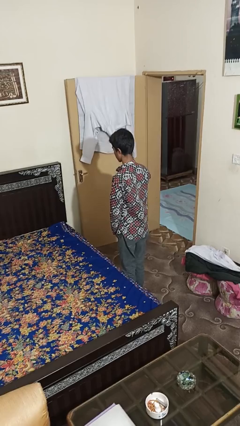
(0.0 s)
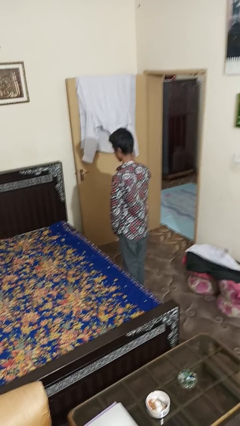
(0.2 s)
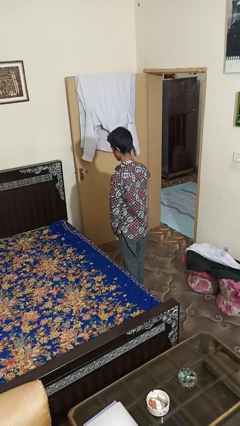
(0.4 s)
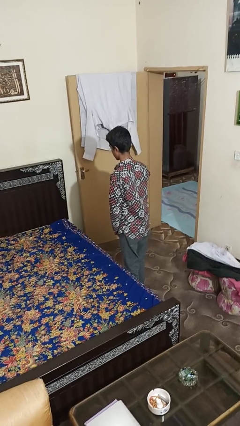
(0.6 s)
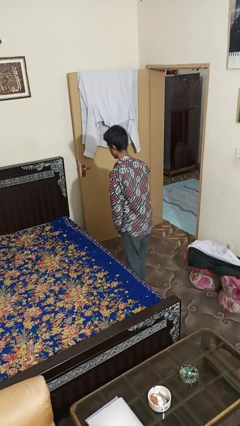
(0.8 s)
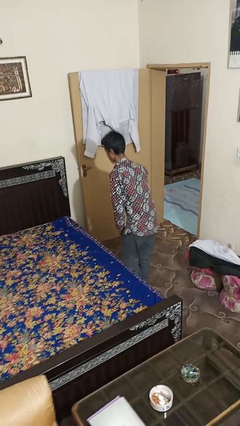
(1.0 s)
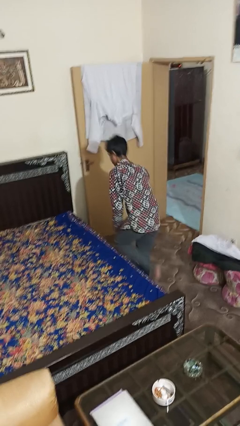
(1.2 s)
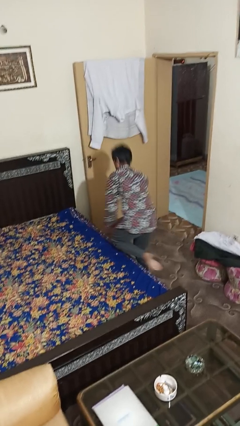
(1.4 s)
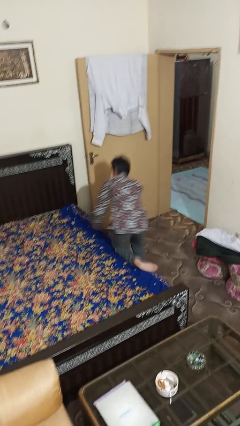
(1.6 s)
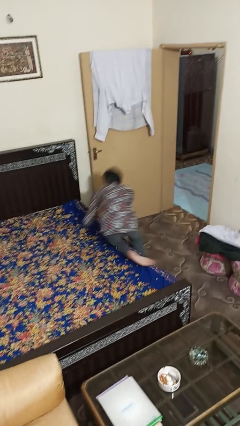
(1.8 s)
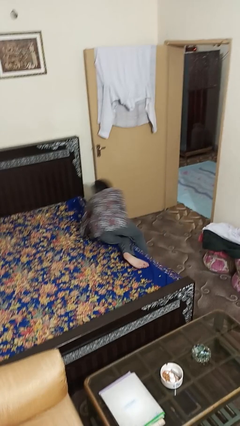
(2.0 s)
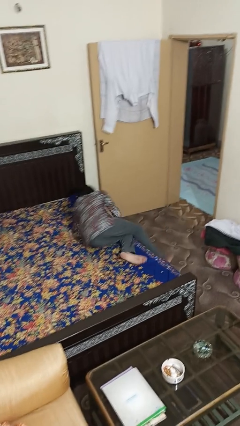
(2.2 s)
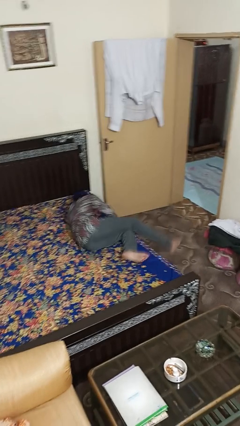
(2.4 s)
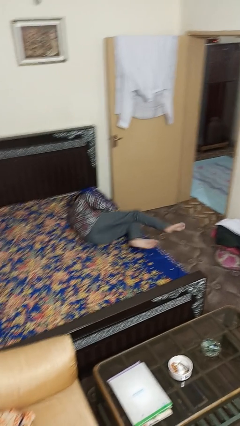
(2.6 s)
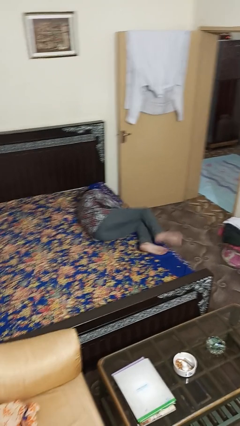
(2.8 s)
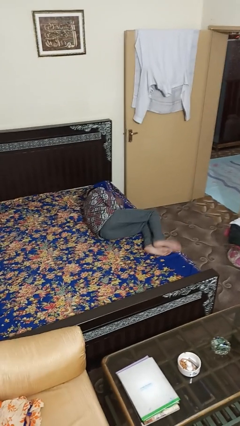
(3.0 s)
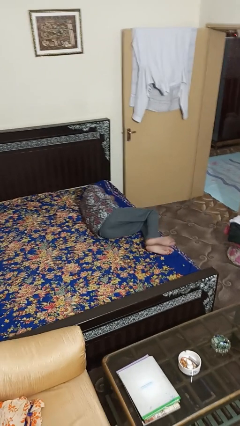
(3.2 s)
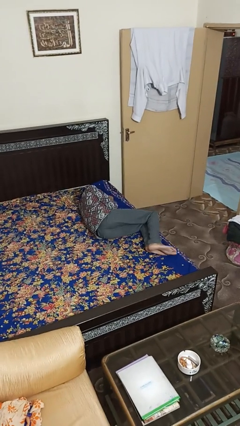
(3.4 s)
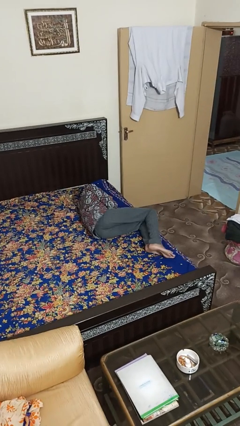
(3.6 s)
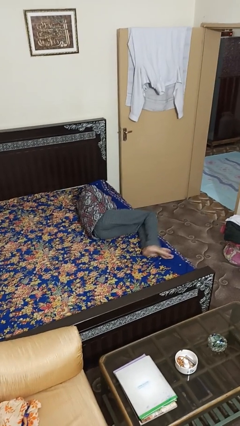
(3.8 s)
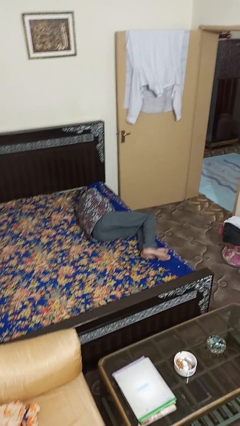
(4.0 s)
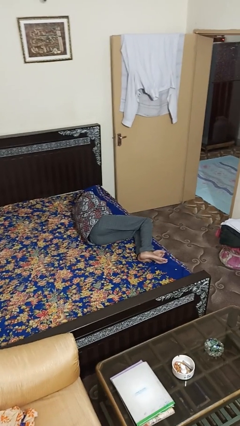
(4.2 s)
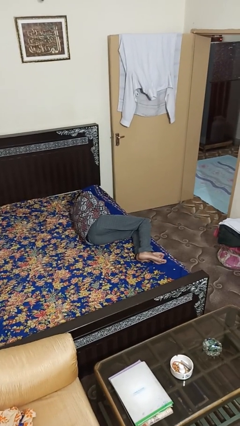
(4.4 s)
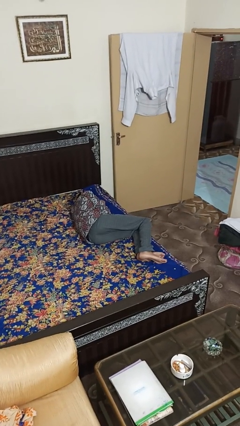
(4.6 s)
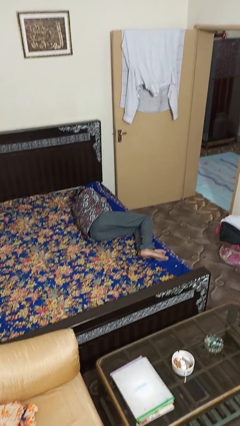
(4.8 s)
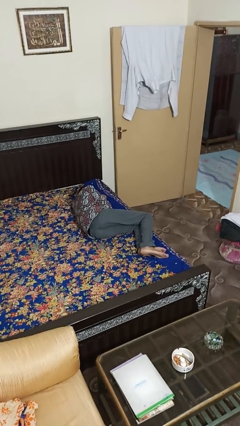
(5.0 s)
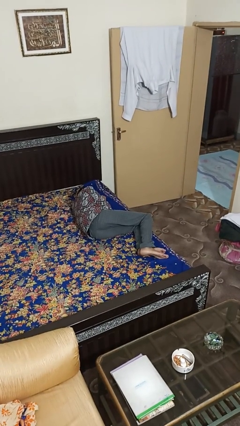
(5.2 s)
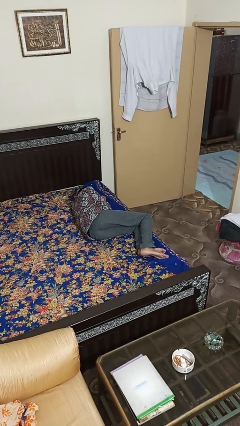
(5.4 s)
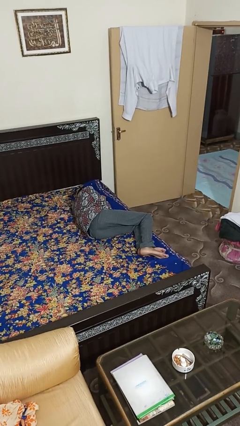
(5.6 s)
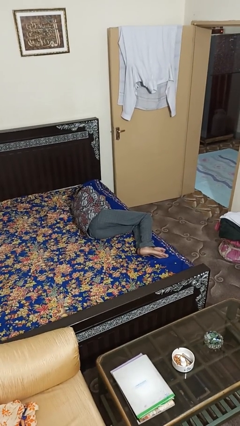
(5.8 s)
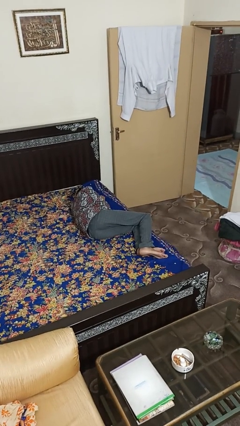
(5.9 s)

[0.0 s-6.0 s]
person lies down on bed

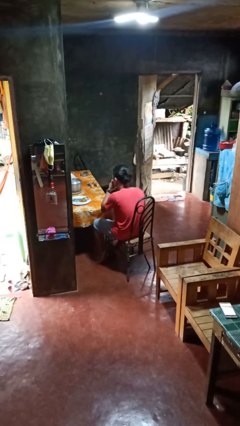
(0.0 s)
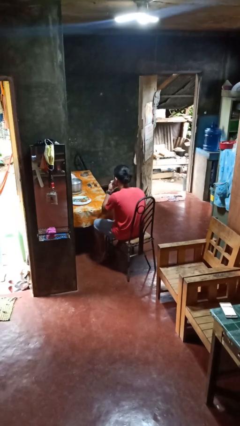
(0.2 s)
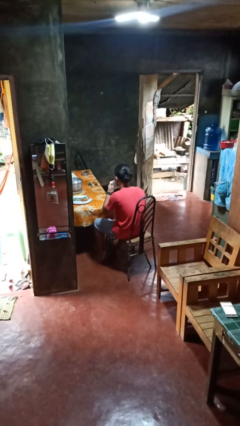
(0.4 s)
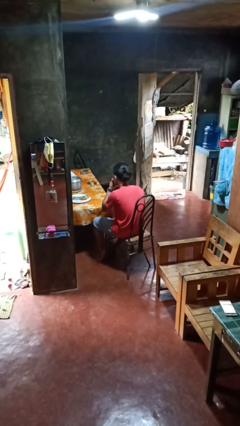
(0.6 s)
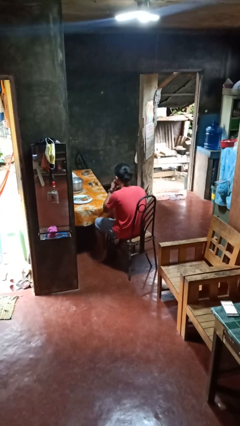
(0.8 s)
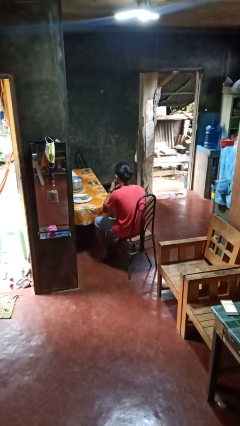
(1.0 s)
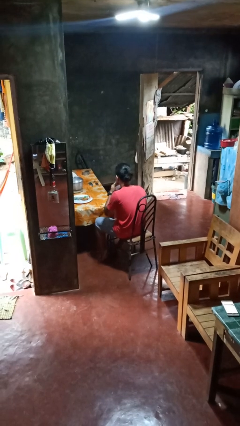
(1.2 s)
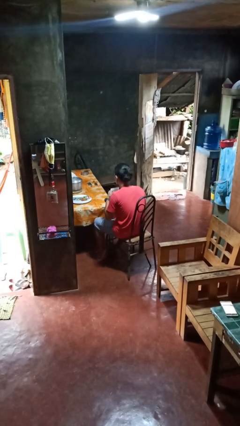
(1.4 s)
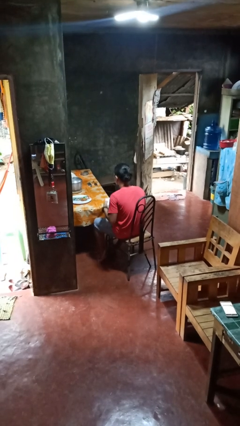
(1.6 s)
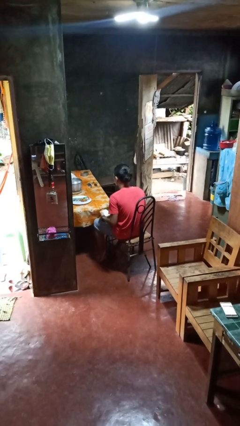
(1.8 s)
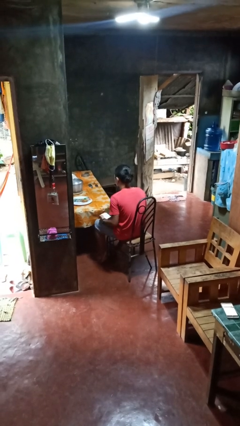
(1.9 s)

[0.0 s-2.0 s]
person wipes mouth with napkin

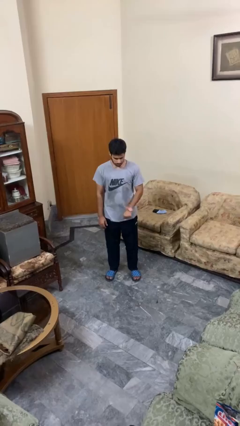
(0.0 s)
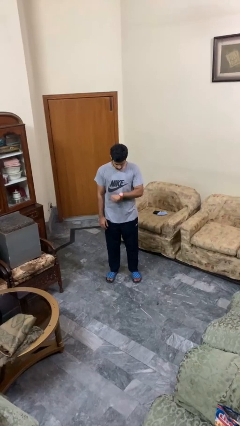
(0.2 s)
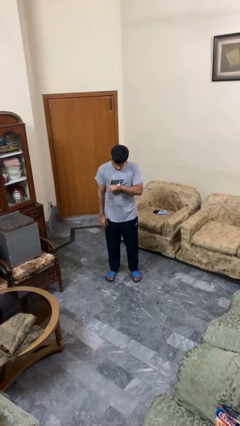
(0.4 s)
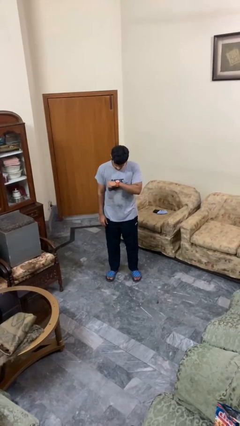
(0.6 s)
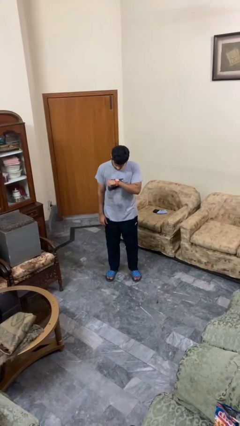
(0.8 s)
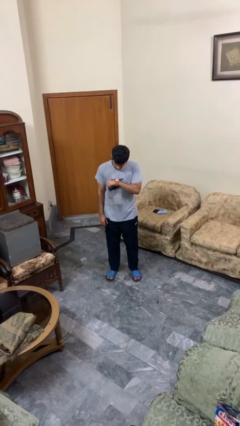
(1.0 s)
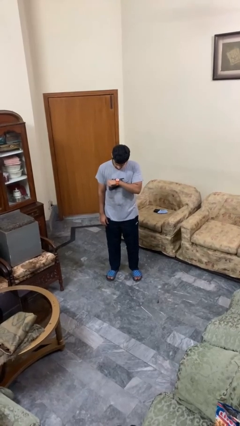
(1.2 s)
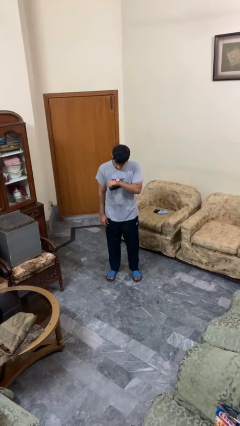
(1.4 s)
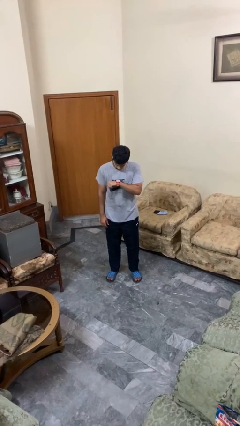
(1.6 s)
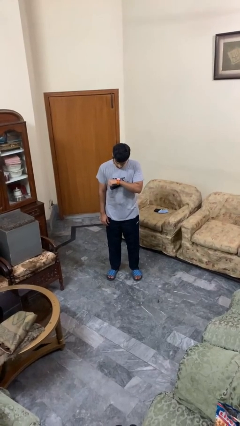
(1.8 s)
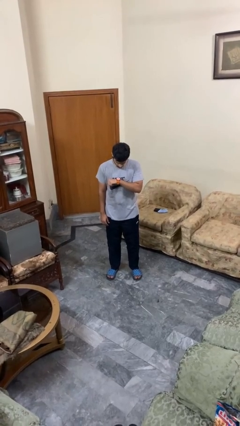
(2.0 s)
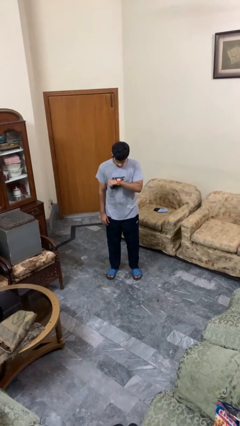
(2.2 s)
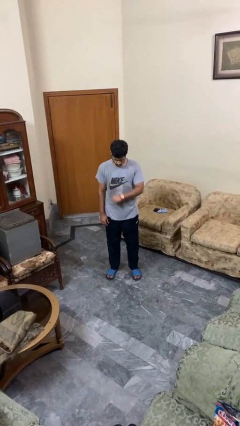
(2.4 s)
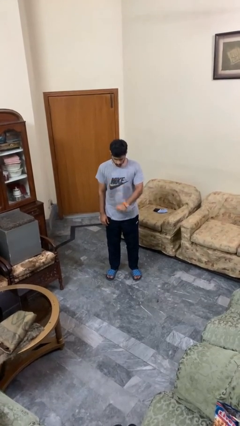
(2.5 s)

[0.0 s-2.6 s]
person looks at wristwatch

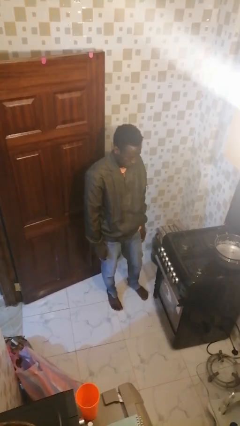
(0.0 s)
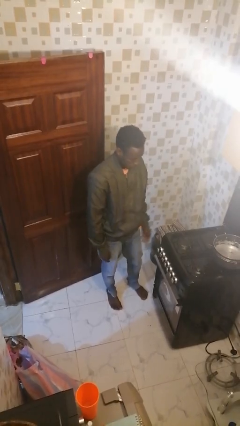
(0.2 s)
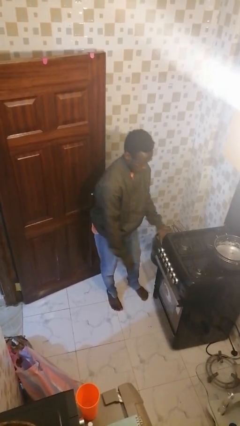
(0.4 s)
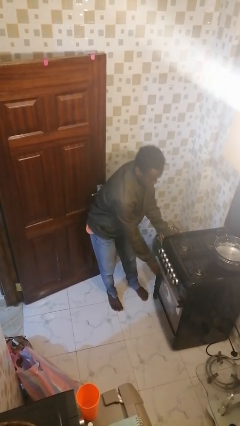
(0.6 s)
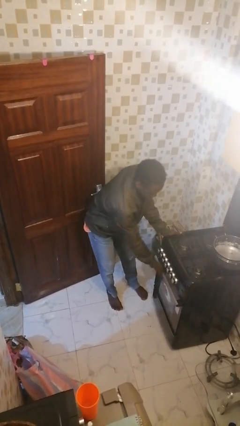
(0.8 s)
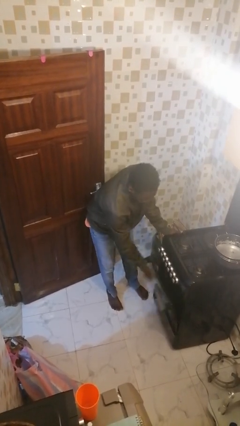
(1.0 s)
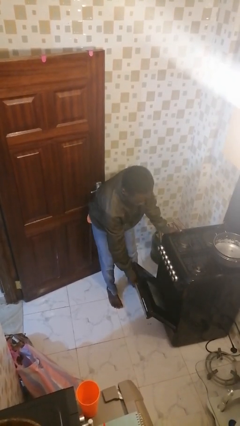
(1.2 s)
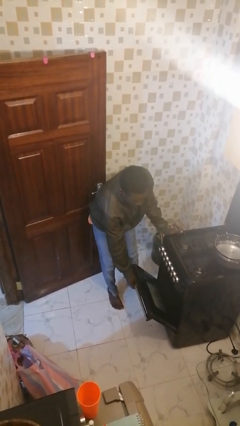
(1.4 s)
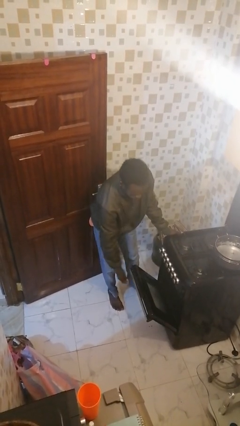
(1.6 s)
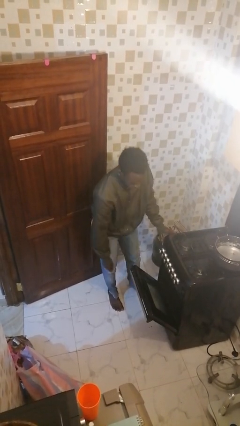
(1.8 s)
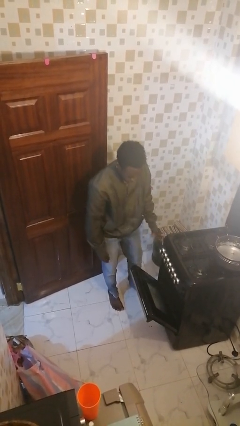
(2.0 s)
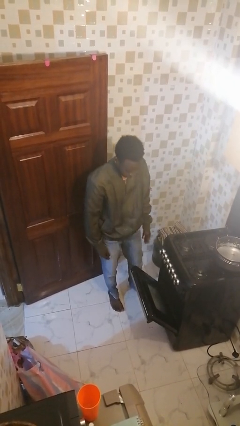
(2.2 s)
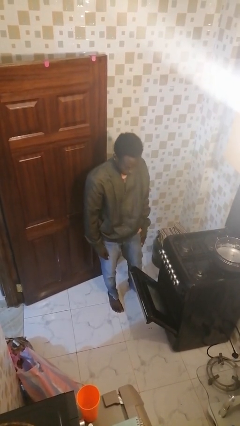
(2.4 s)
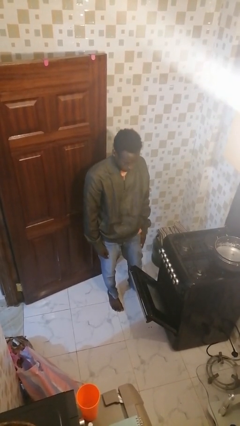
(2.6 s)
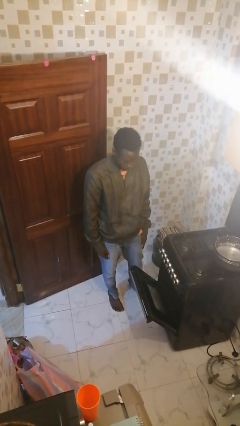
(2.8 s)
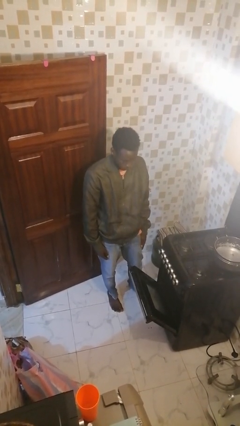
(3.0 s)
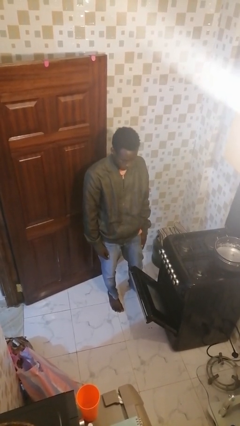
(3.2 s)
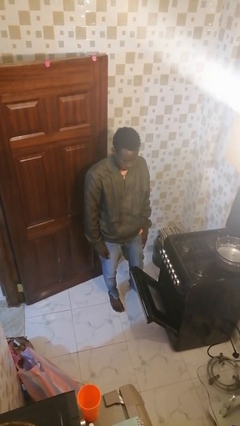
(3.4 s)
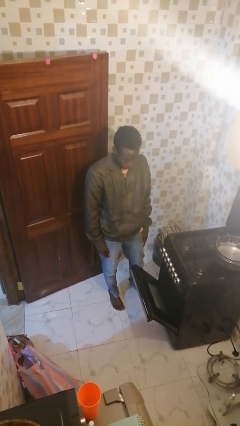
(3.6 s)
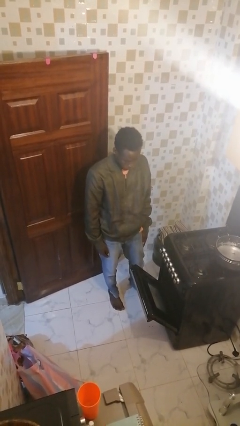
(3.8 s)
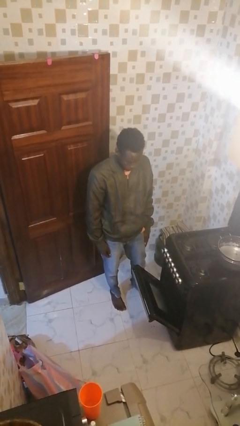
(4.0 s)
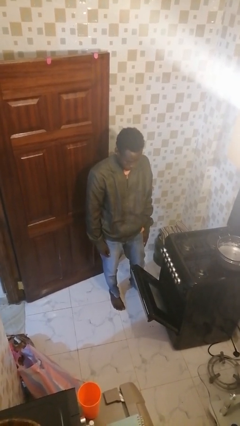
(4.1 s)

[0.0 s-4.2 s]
person opens oven door

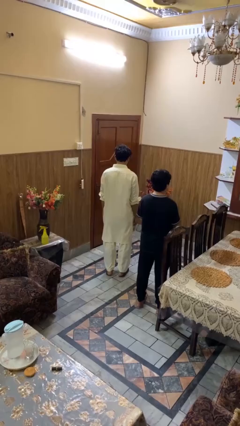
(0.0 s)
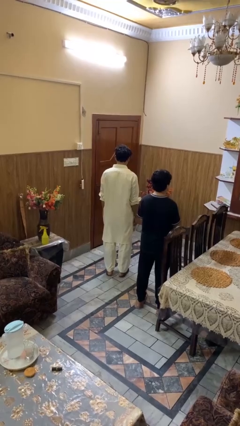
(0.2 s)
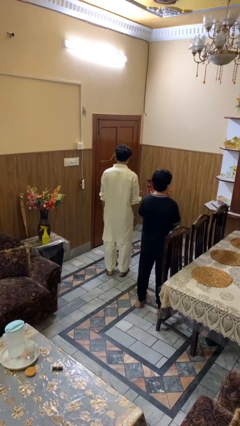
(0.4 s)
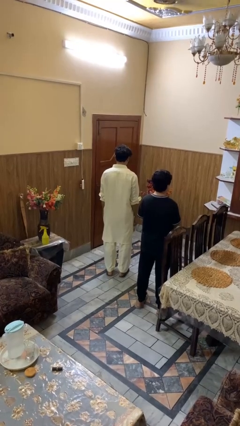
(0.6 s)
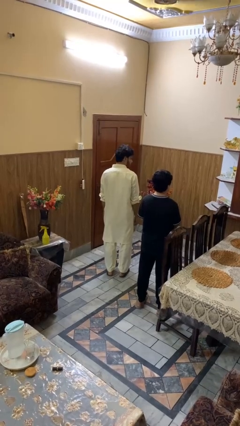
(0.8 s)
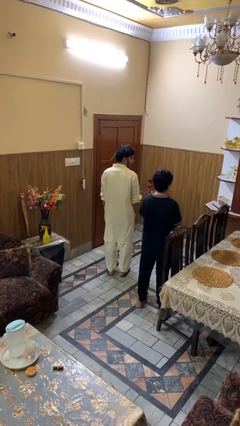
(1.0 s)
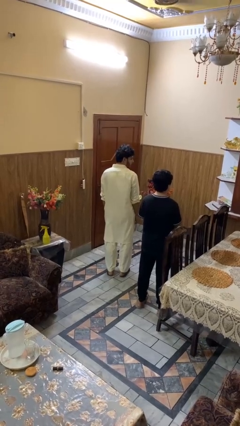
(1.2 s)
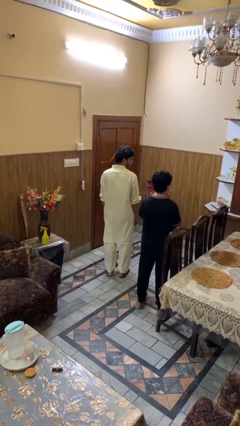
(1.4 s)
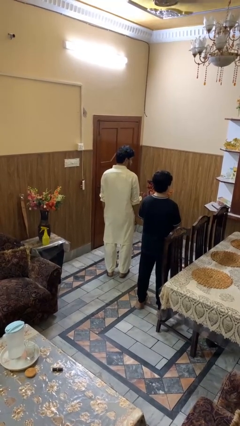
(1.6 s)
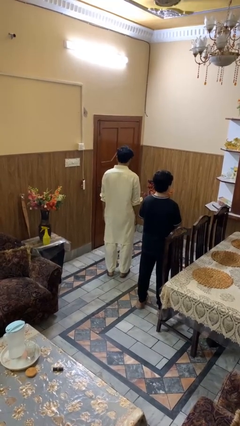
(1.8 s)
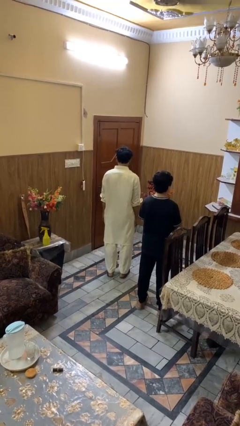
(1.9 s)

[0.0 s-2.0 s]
person looks over shoulder

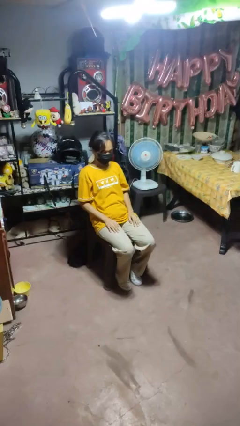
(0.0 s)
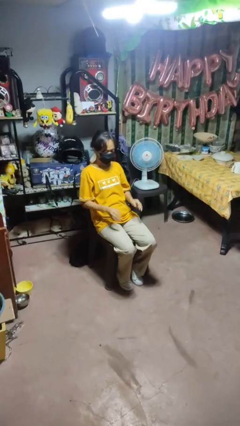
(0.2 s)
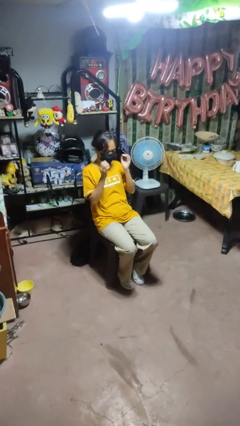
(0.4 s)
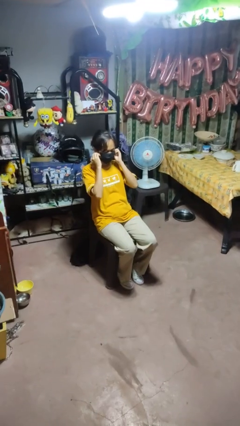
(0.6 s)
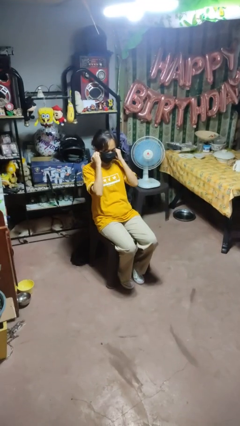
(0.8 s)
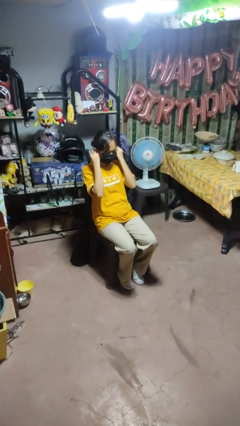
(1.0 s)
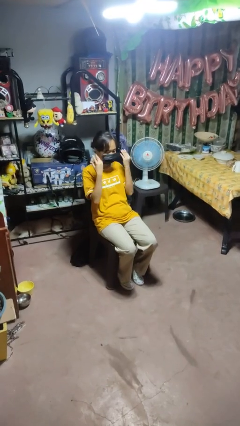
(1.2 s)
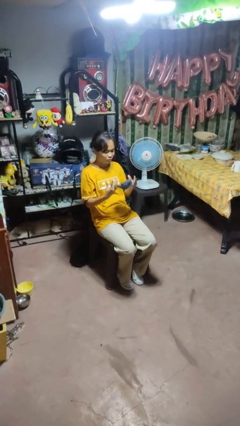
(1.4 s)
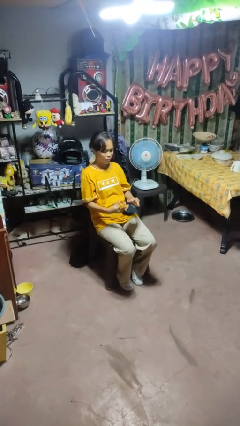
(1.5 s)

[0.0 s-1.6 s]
person takes off facemask
